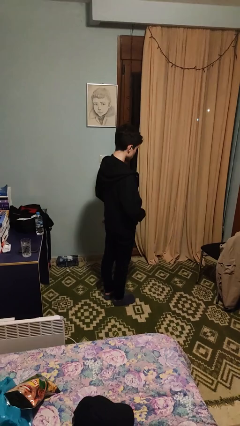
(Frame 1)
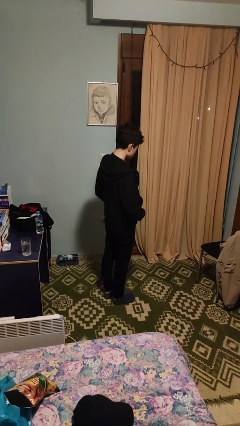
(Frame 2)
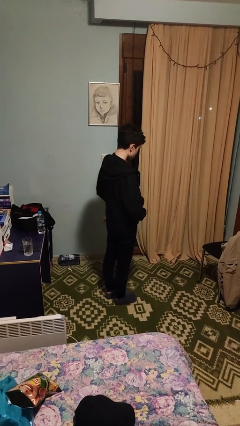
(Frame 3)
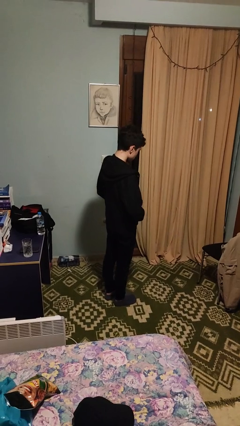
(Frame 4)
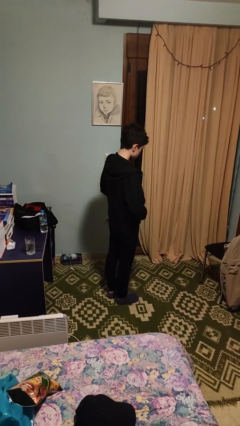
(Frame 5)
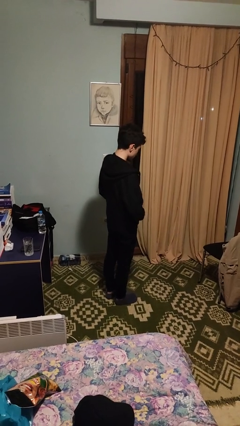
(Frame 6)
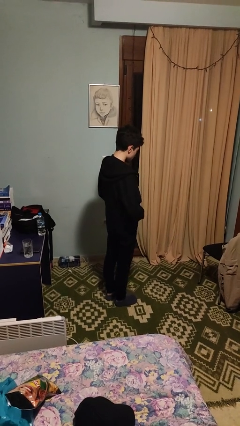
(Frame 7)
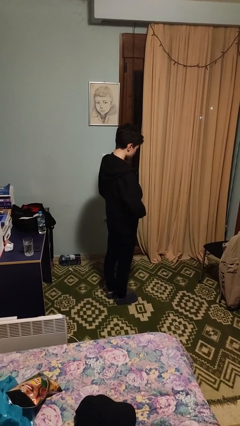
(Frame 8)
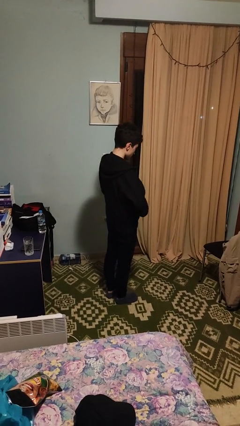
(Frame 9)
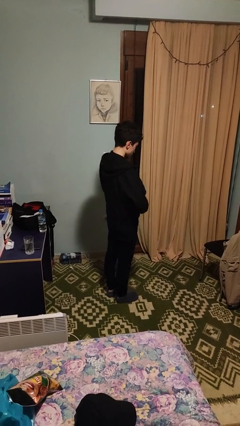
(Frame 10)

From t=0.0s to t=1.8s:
person zips up jacket

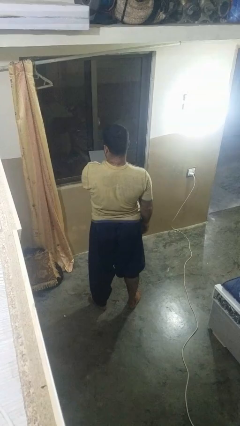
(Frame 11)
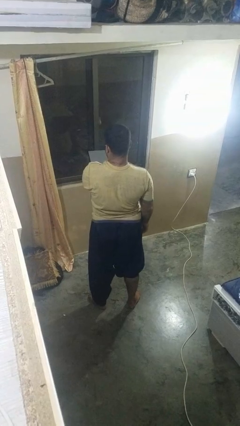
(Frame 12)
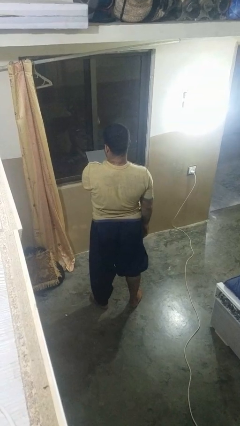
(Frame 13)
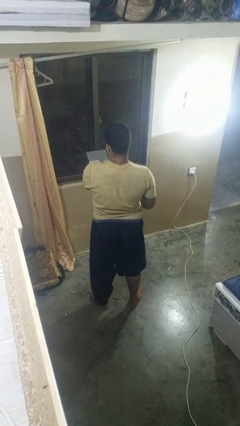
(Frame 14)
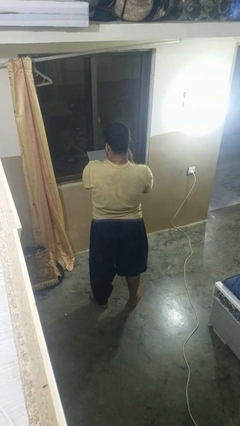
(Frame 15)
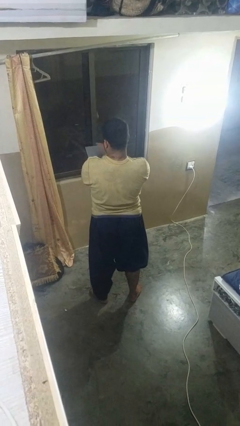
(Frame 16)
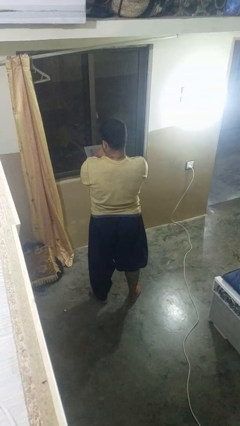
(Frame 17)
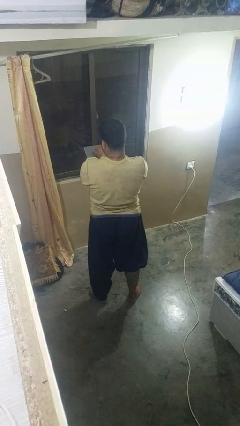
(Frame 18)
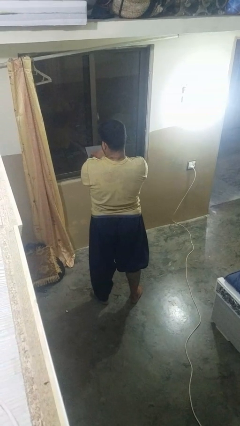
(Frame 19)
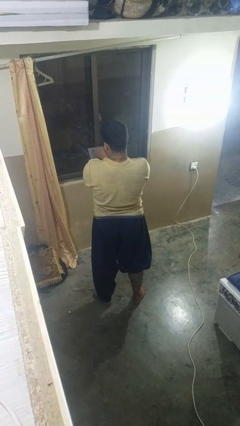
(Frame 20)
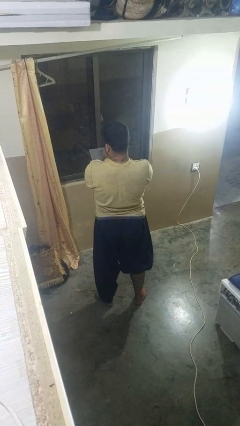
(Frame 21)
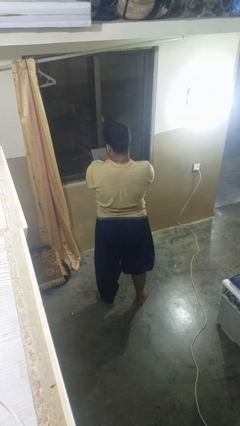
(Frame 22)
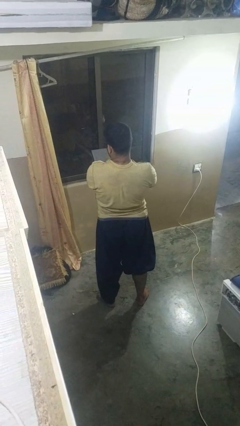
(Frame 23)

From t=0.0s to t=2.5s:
person interacts with tablet

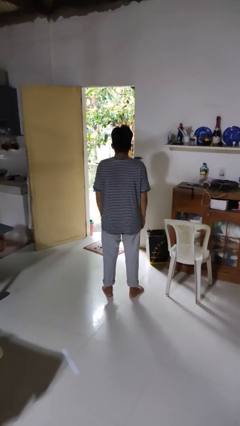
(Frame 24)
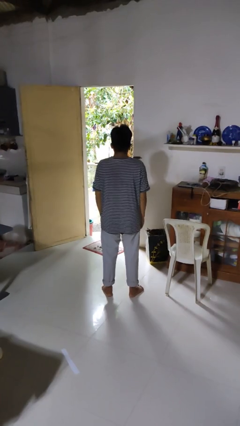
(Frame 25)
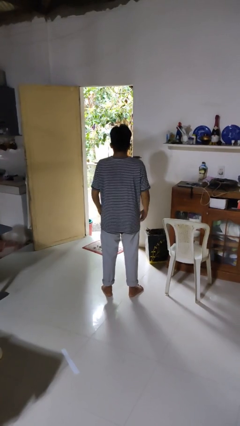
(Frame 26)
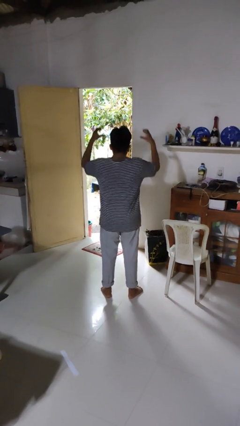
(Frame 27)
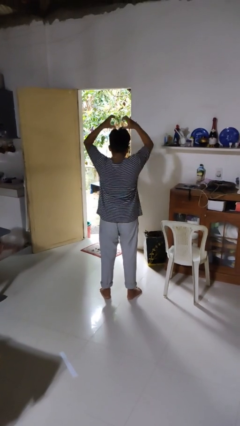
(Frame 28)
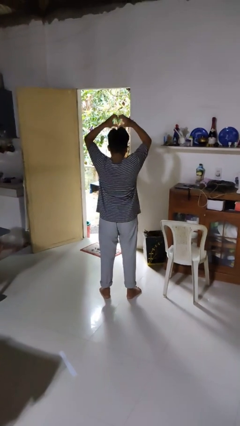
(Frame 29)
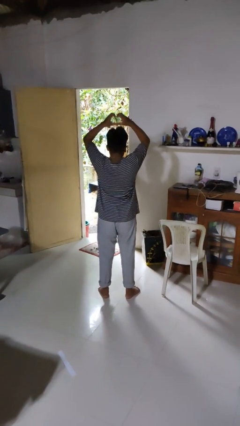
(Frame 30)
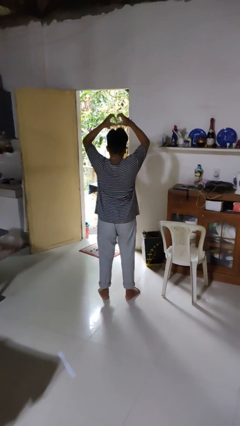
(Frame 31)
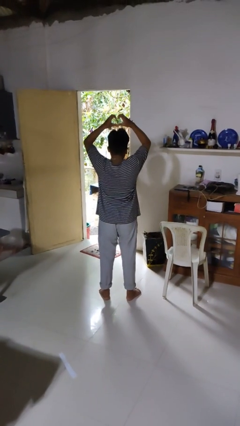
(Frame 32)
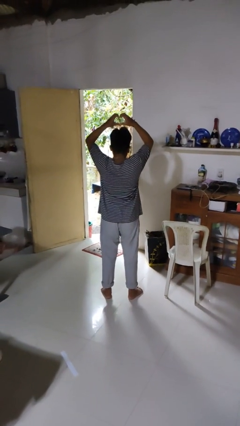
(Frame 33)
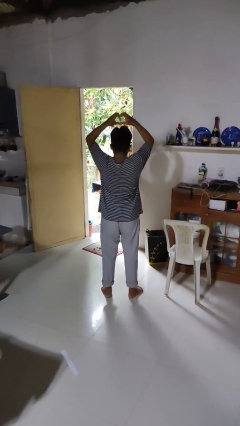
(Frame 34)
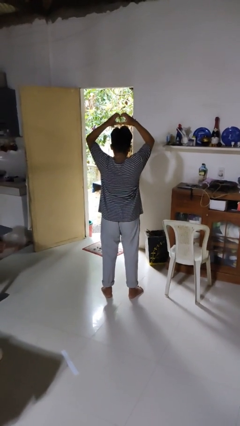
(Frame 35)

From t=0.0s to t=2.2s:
person gestures heart

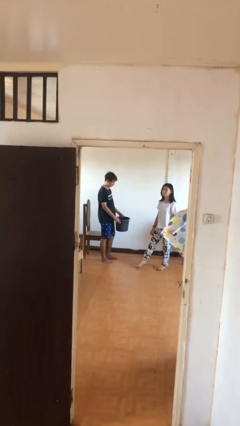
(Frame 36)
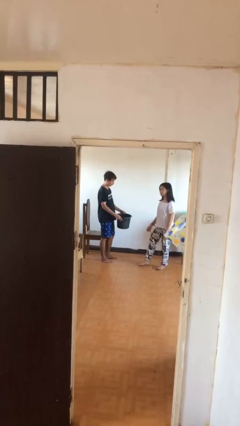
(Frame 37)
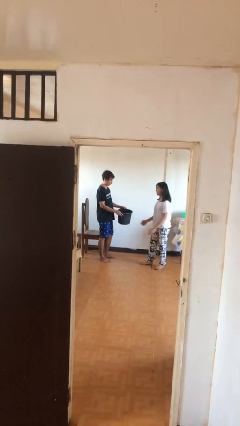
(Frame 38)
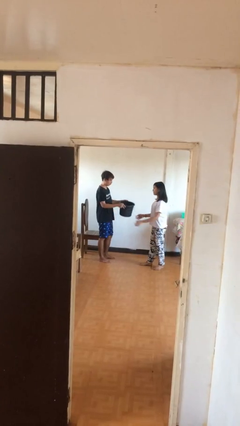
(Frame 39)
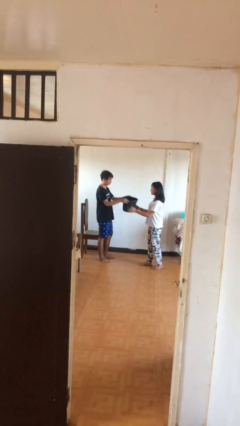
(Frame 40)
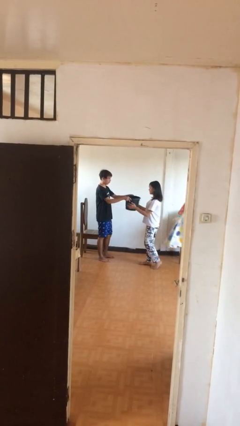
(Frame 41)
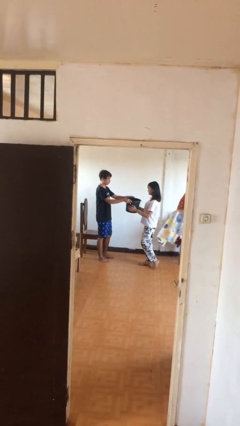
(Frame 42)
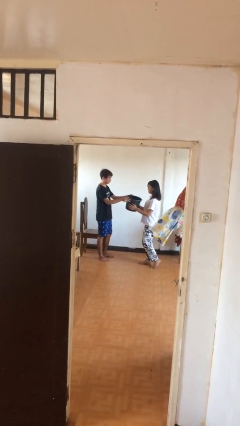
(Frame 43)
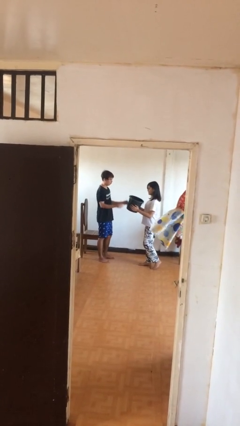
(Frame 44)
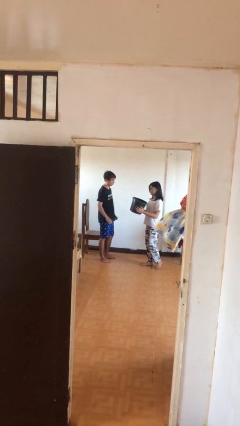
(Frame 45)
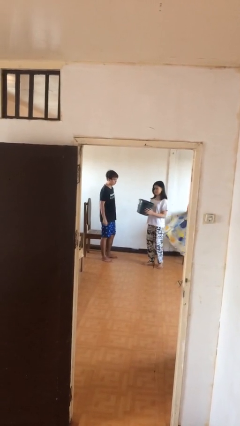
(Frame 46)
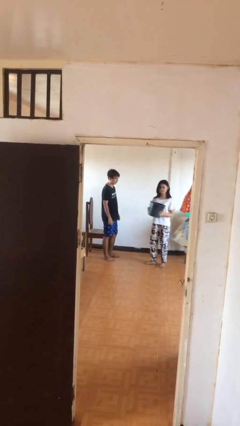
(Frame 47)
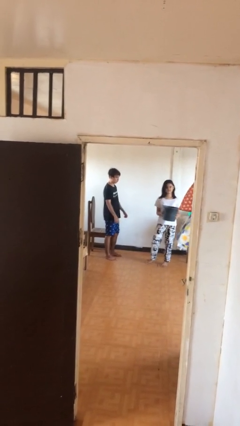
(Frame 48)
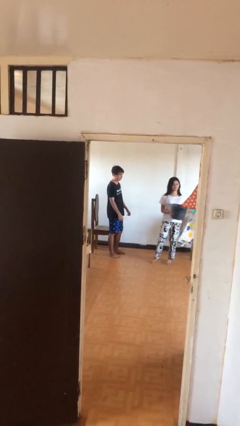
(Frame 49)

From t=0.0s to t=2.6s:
person transfers object to person

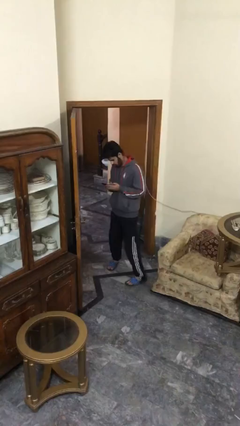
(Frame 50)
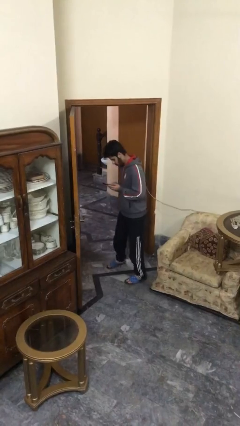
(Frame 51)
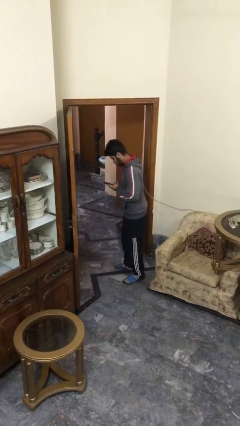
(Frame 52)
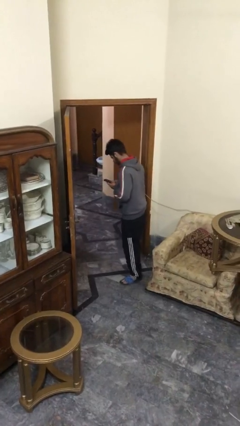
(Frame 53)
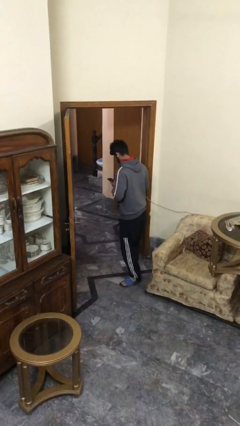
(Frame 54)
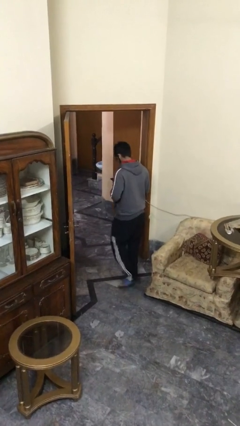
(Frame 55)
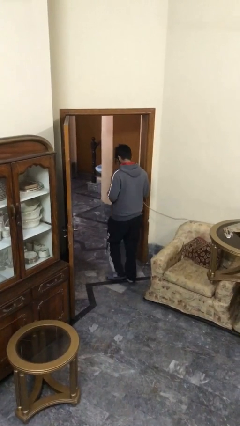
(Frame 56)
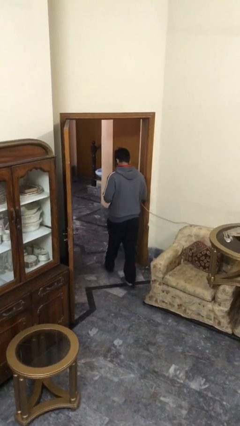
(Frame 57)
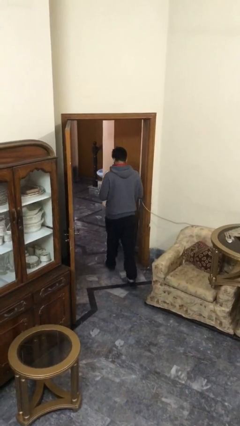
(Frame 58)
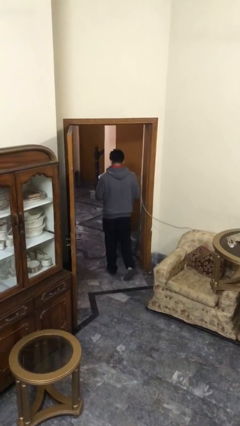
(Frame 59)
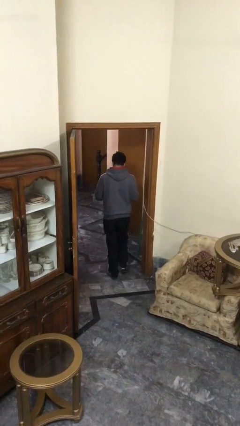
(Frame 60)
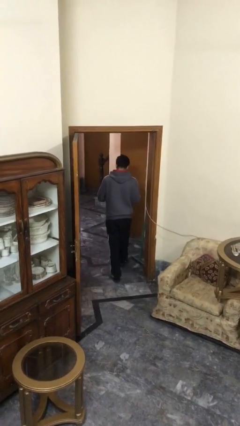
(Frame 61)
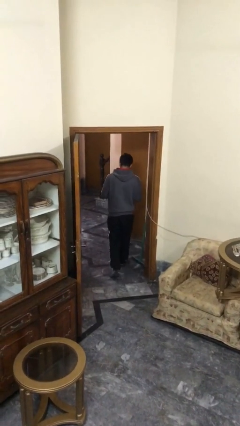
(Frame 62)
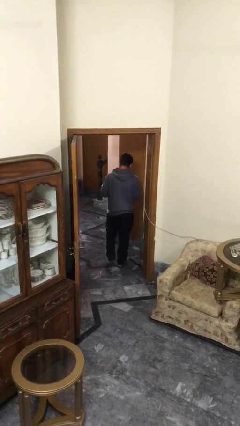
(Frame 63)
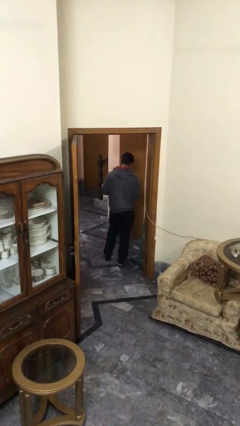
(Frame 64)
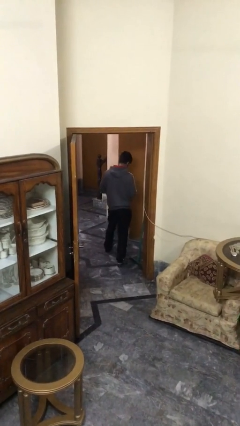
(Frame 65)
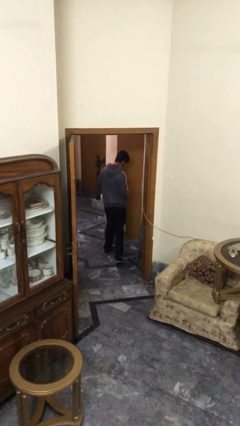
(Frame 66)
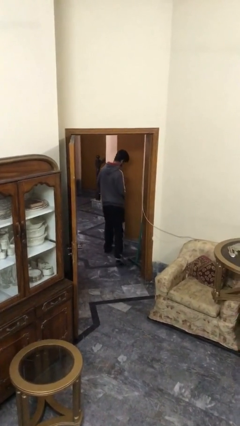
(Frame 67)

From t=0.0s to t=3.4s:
person exits scene through structure

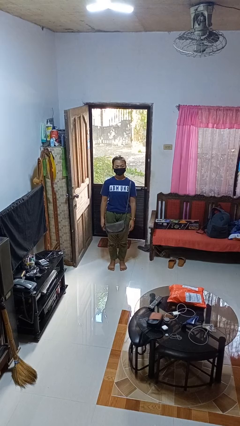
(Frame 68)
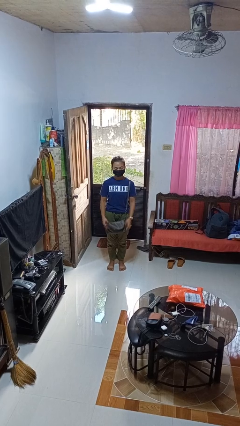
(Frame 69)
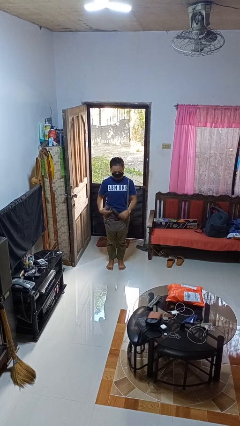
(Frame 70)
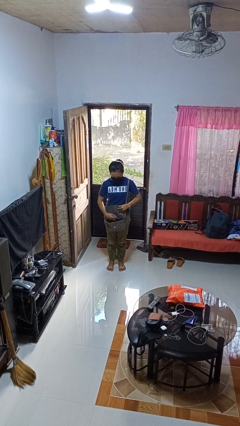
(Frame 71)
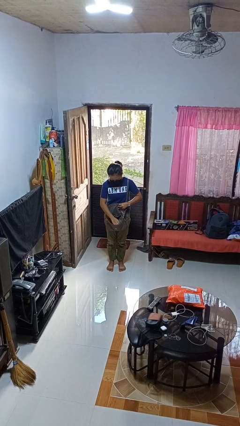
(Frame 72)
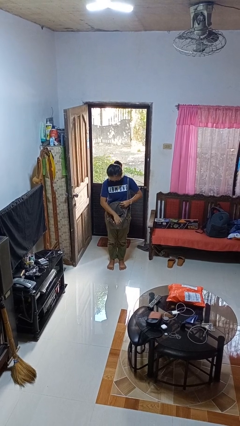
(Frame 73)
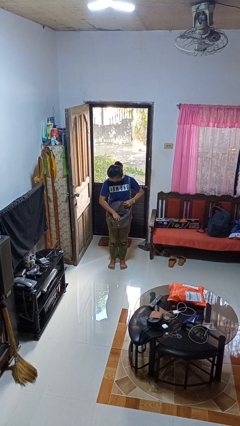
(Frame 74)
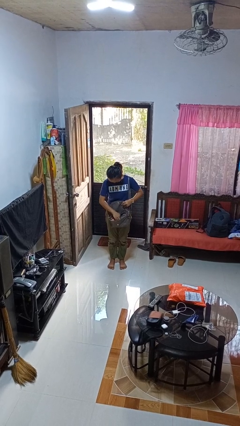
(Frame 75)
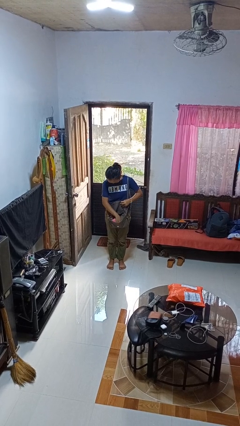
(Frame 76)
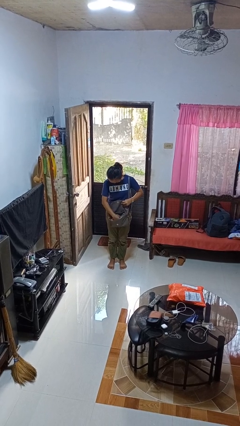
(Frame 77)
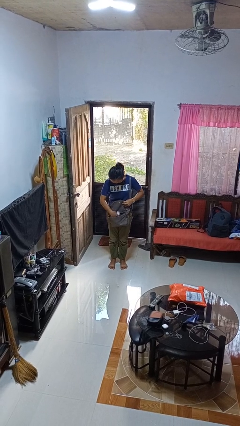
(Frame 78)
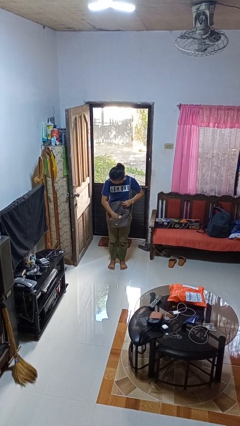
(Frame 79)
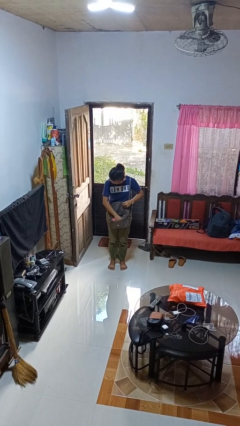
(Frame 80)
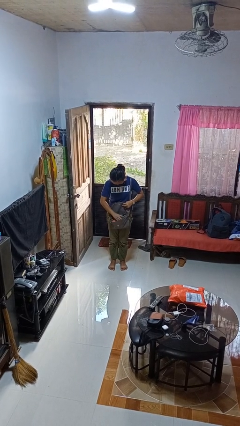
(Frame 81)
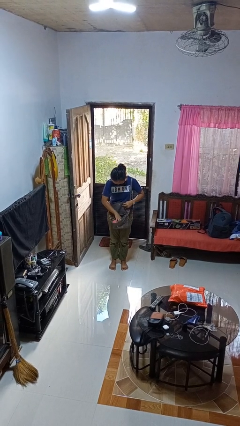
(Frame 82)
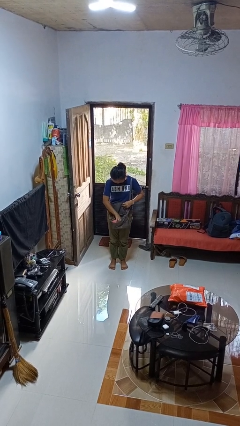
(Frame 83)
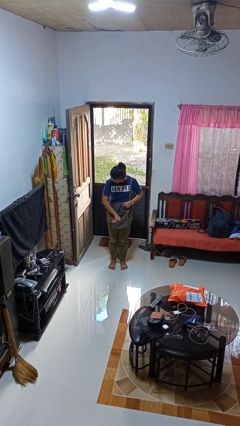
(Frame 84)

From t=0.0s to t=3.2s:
person searches in purse

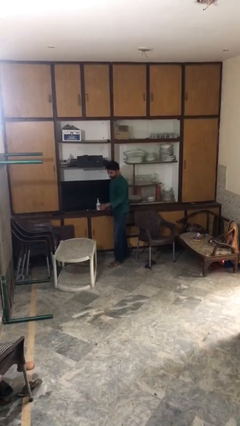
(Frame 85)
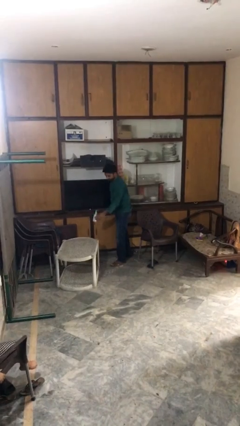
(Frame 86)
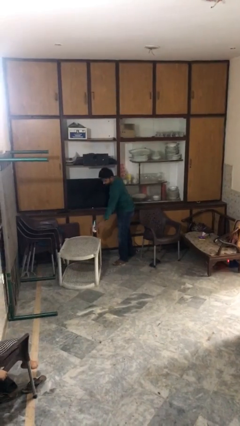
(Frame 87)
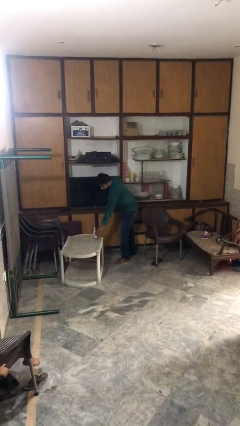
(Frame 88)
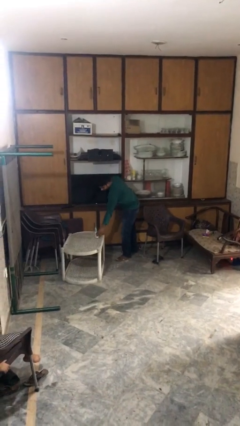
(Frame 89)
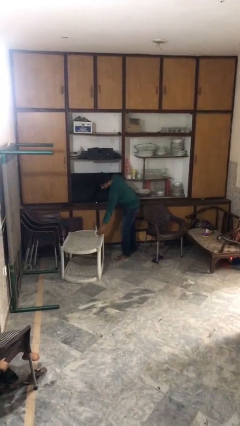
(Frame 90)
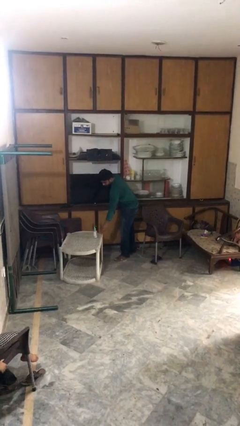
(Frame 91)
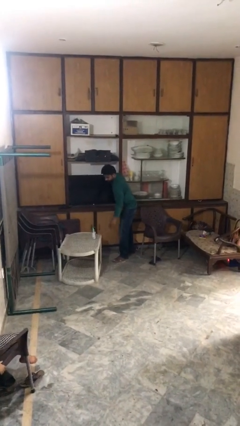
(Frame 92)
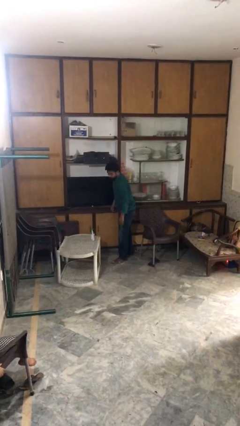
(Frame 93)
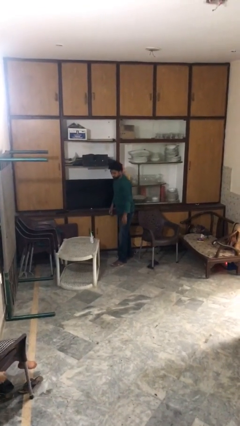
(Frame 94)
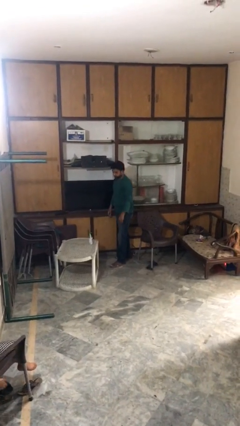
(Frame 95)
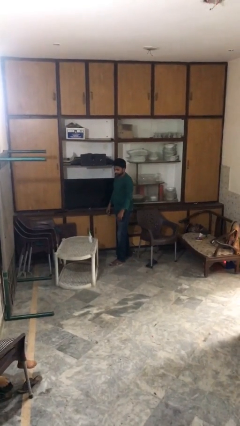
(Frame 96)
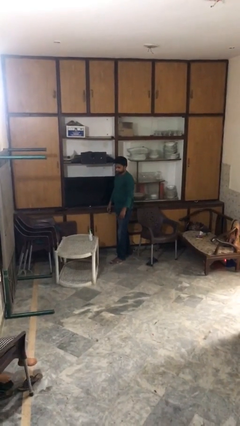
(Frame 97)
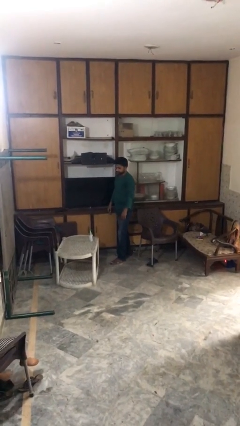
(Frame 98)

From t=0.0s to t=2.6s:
person puts down object on table
